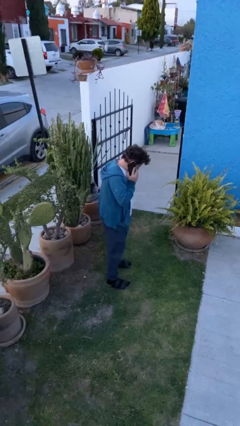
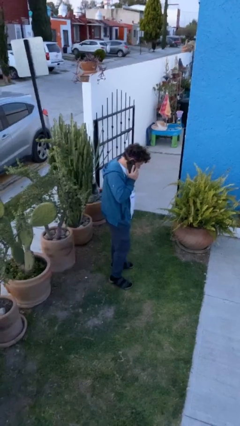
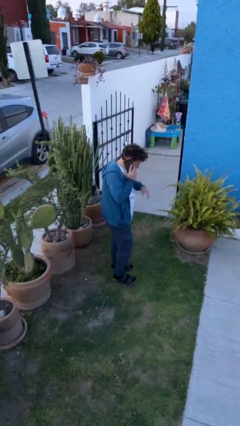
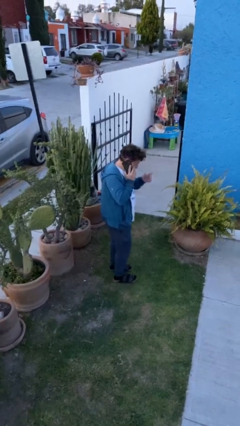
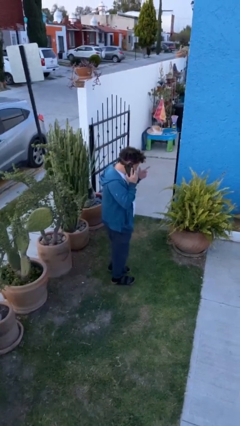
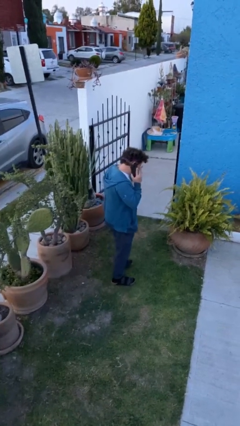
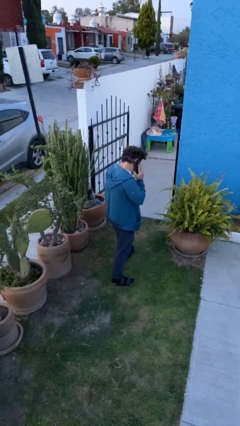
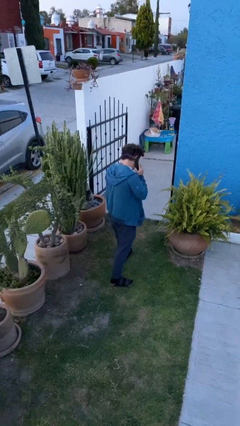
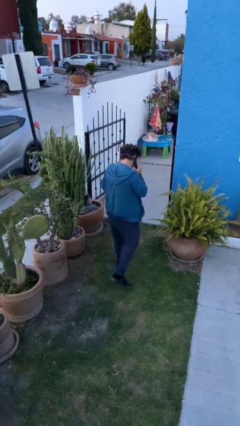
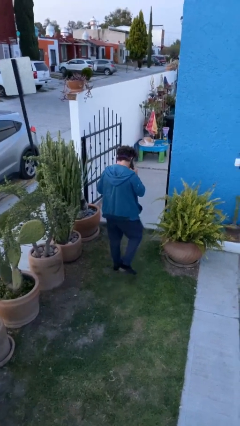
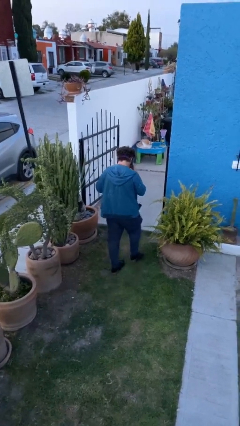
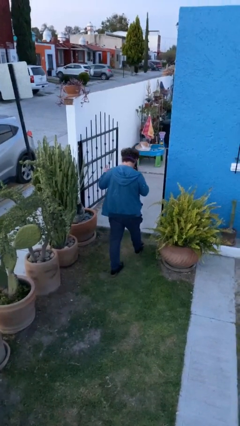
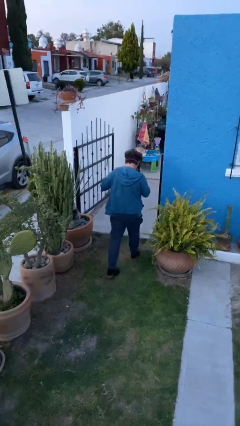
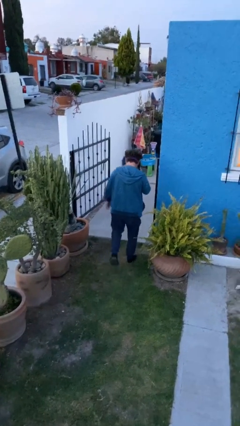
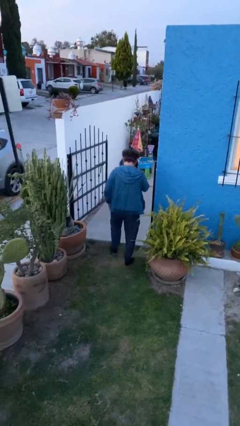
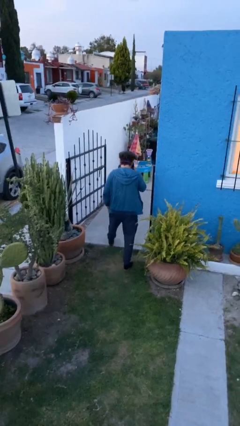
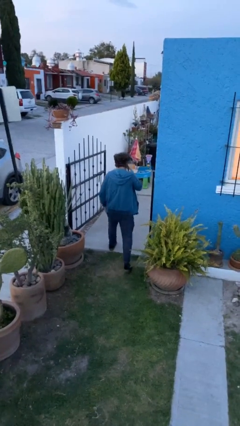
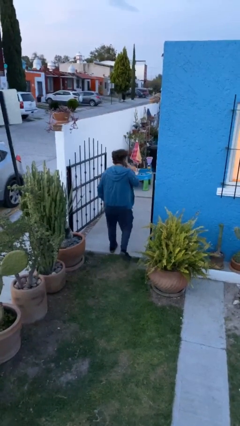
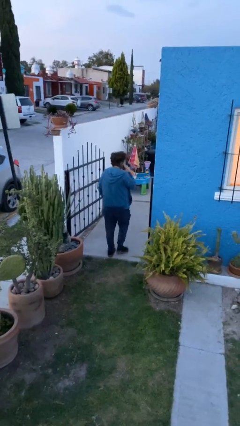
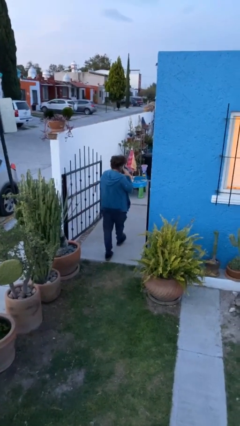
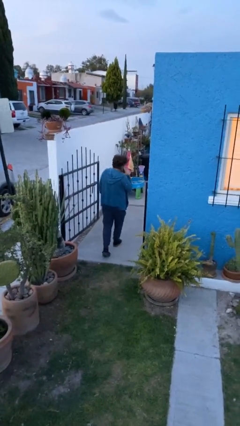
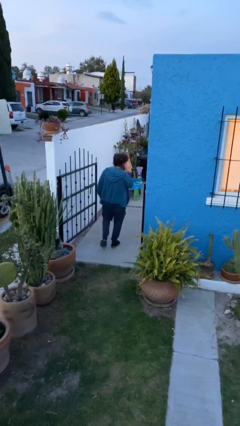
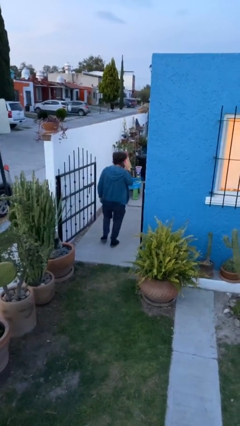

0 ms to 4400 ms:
person exits scene through structure

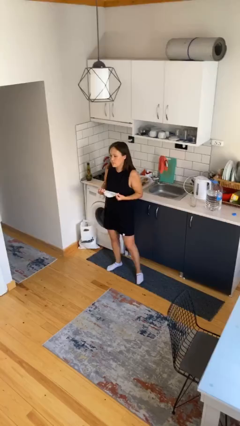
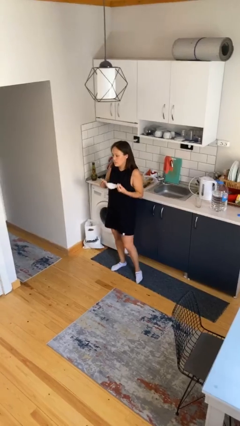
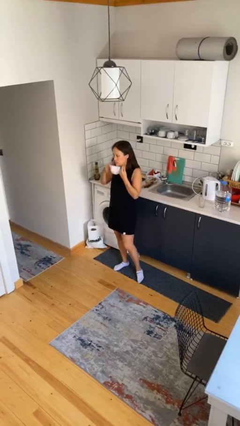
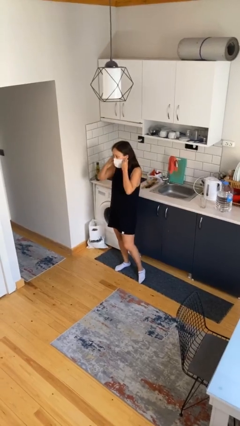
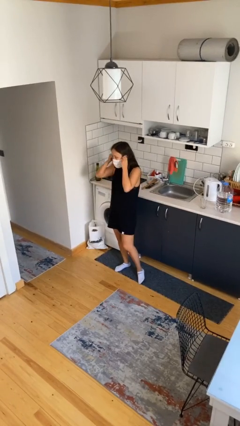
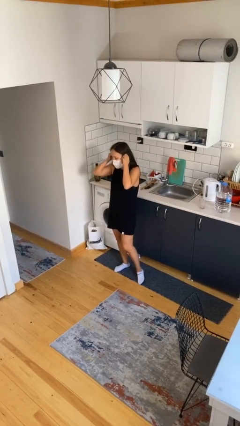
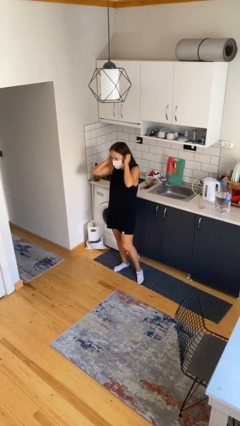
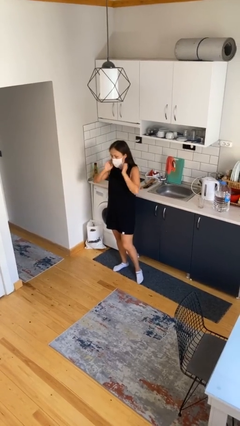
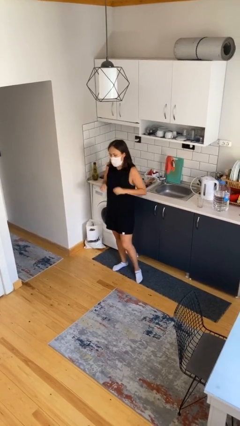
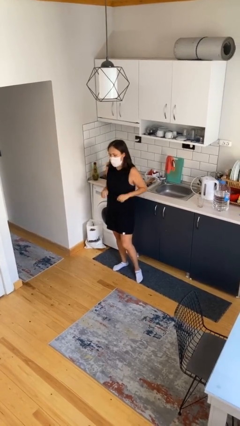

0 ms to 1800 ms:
person puts on facemask

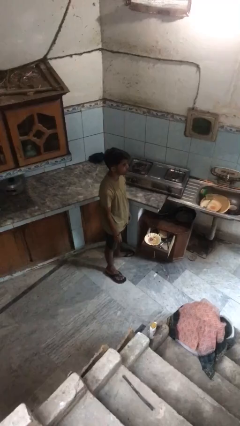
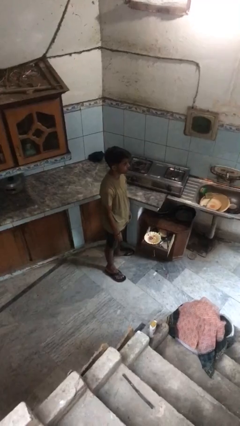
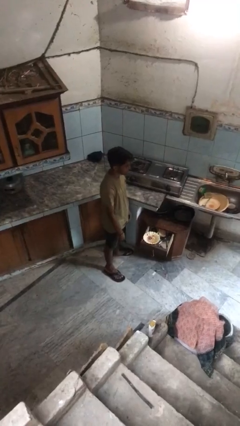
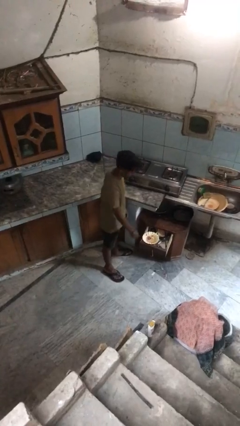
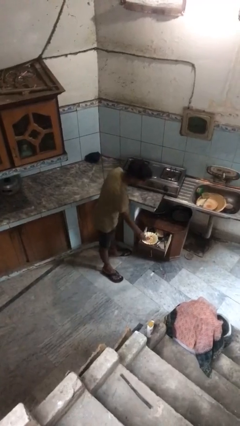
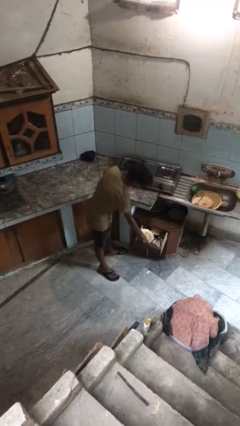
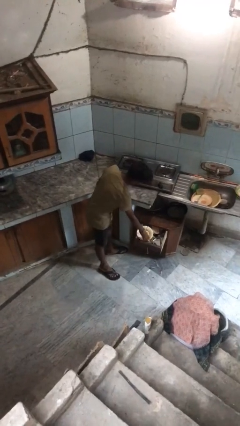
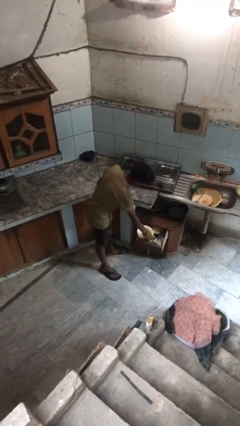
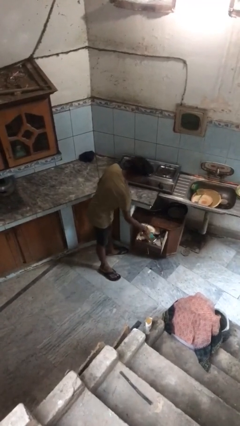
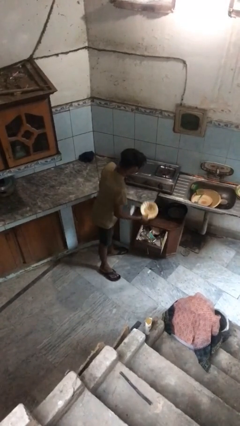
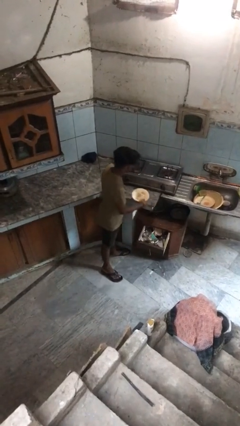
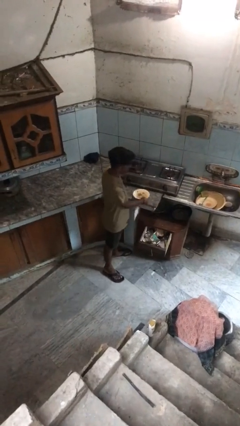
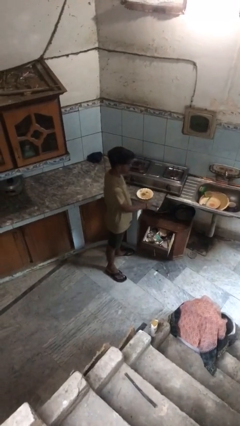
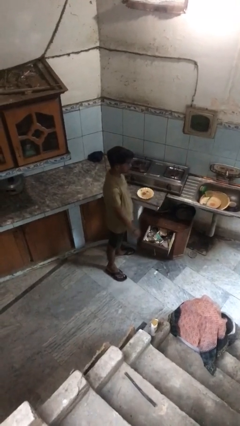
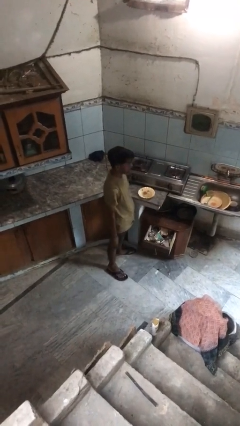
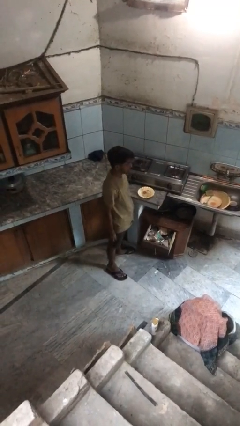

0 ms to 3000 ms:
person takes object from kitchen drawer

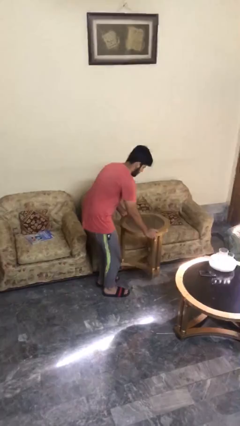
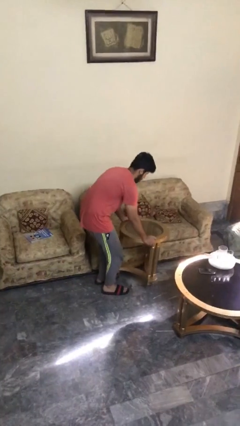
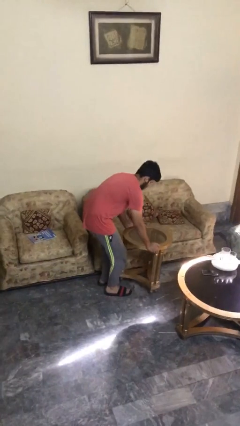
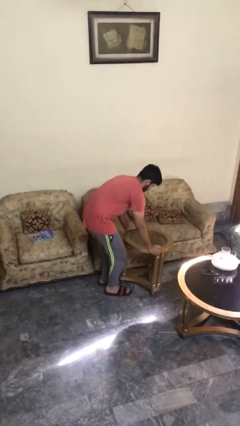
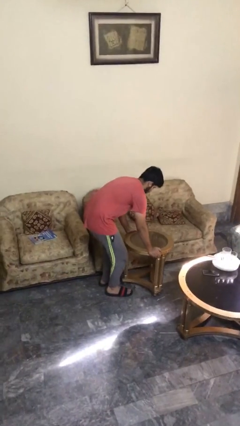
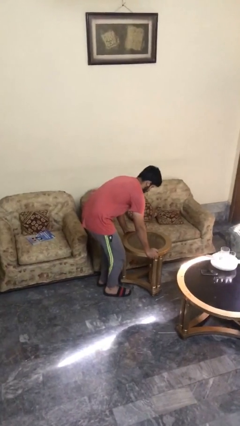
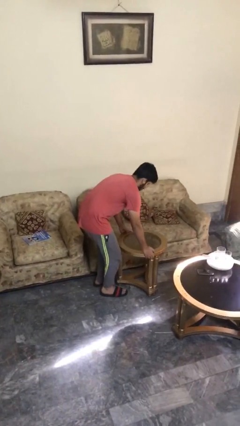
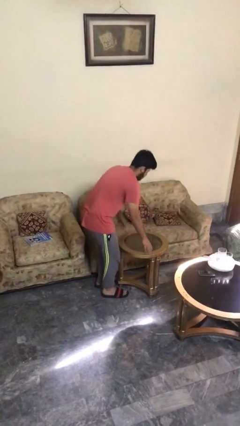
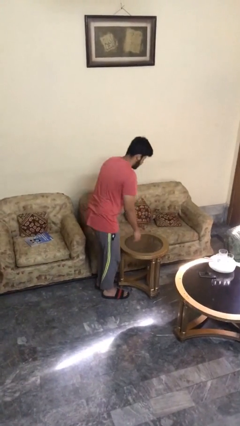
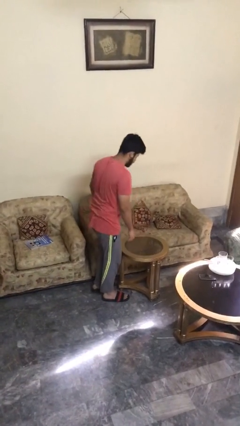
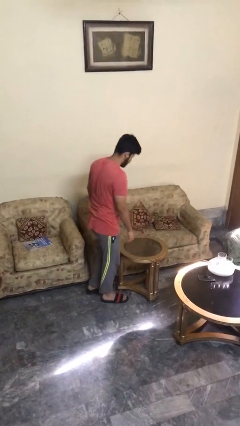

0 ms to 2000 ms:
person puts down object on floor

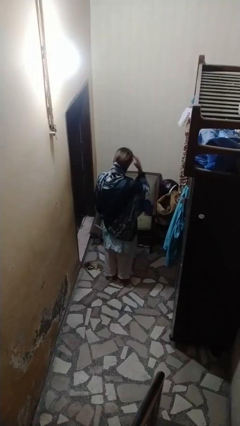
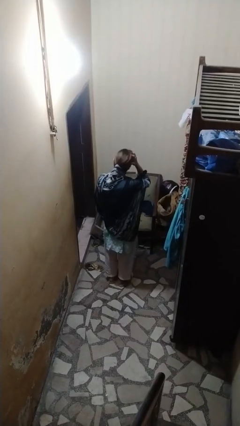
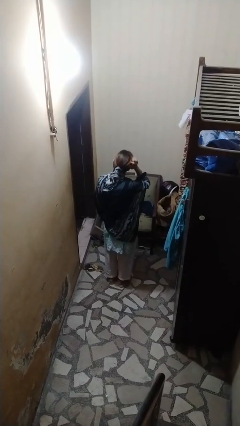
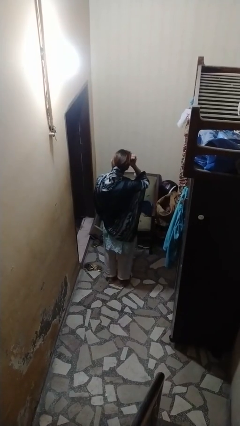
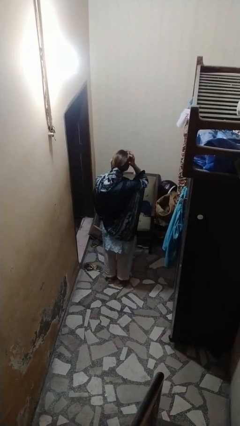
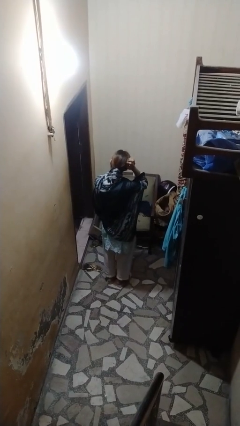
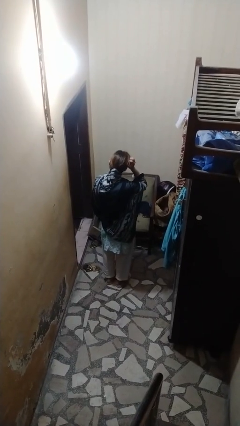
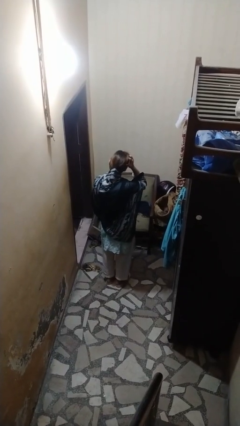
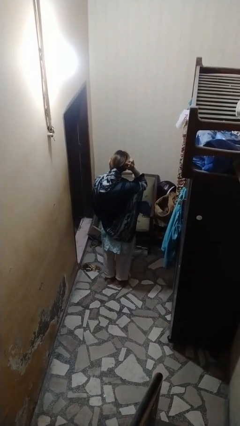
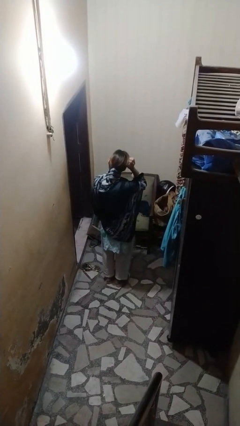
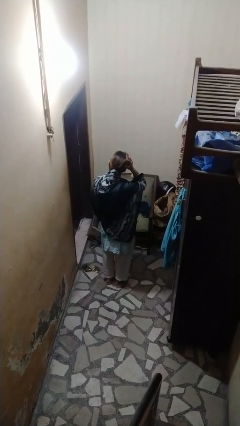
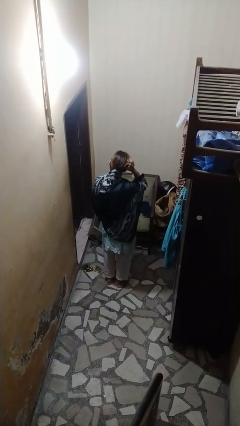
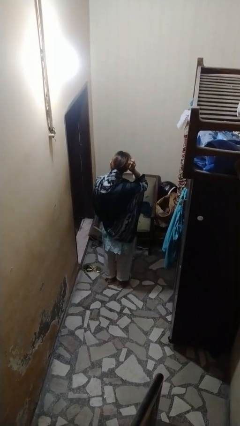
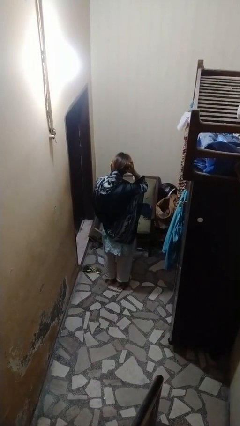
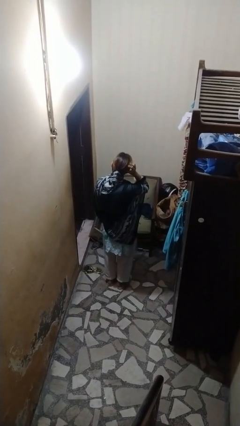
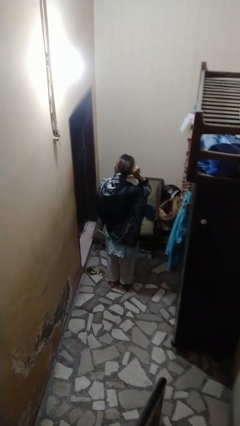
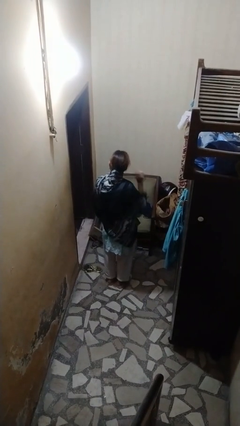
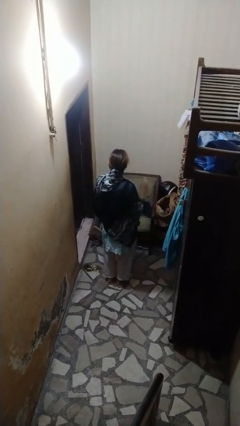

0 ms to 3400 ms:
person strokes hair

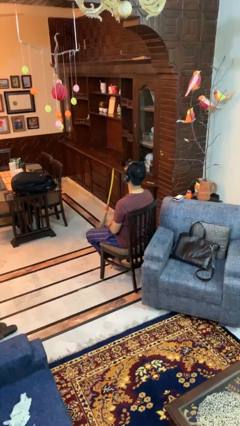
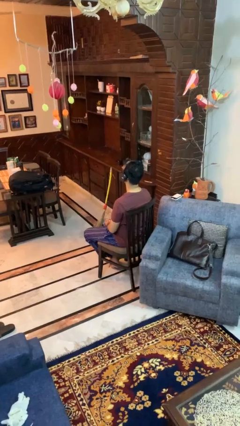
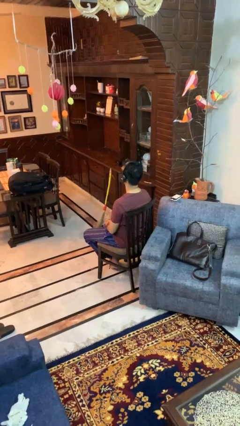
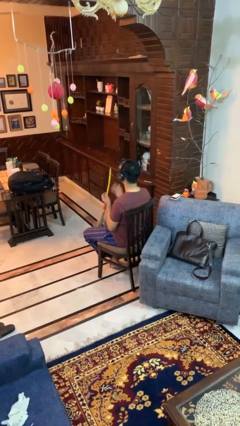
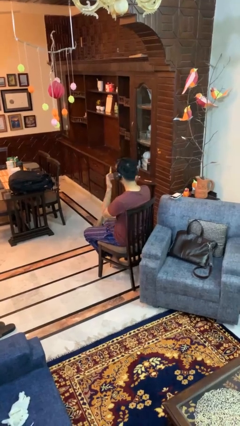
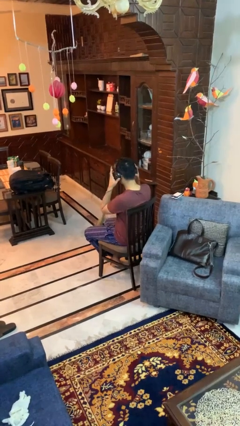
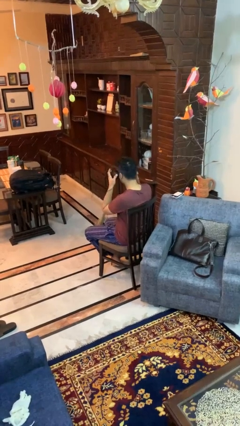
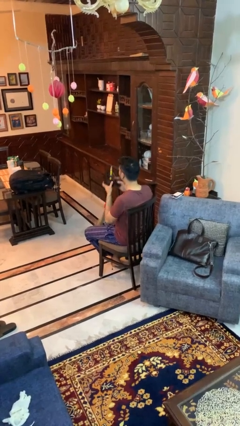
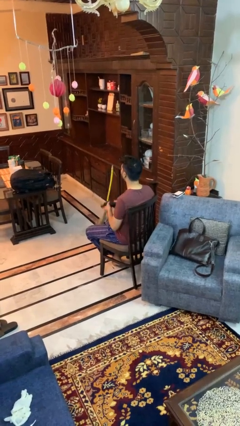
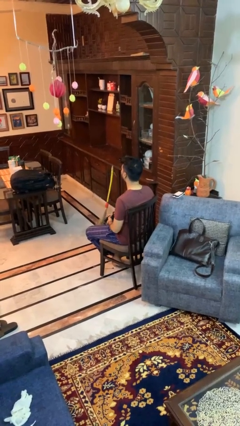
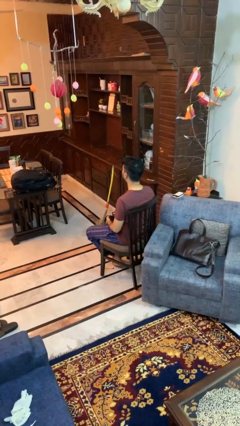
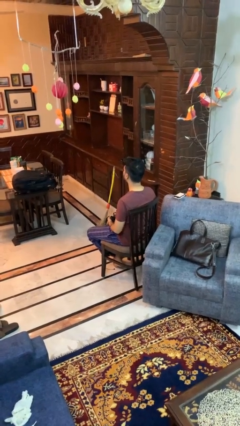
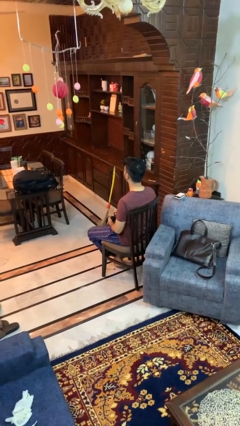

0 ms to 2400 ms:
person takes off headphones

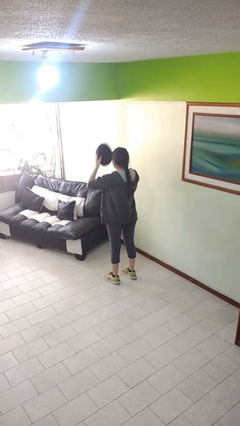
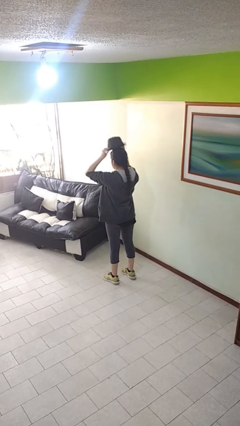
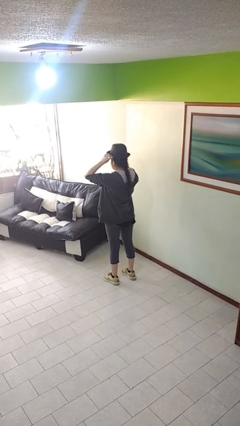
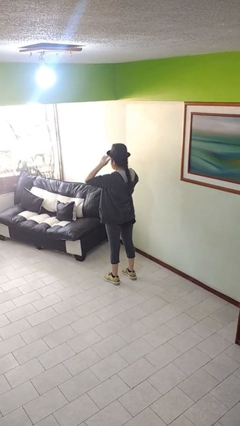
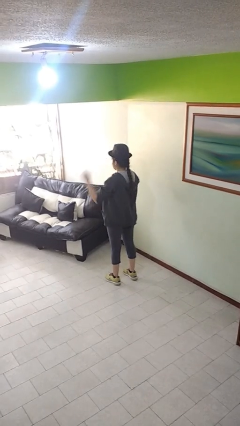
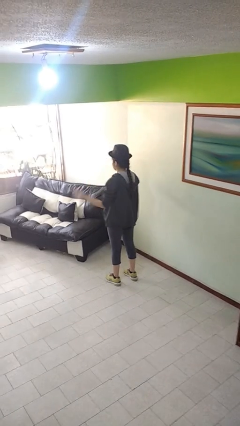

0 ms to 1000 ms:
person puts on hat
